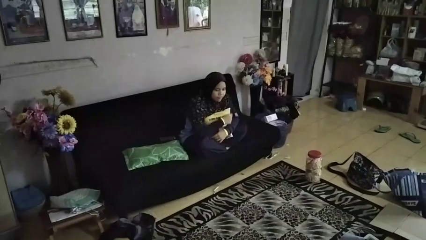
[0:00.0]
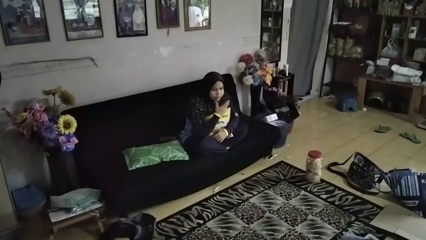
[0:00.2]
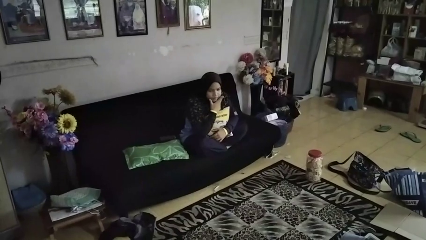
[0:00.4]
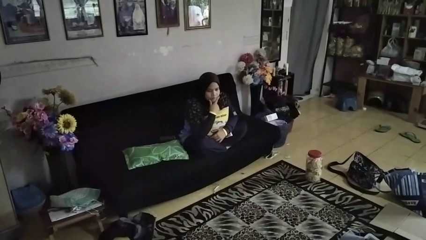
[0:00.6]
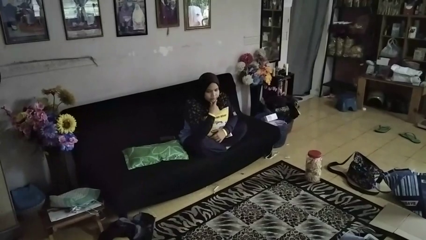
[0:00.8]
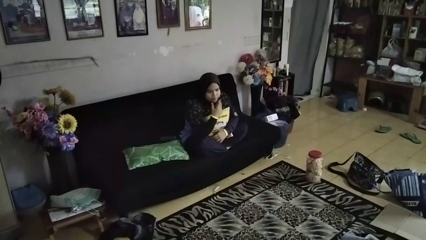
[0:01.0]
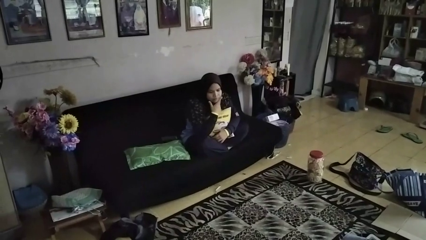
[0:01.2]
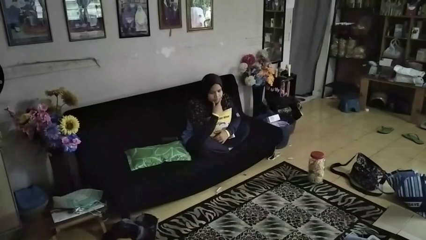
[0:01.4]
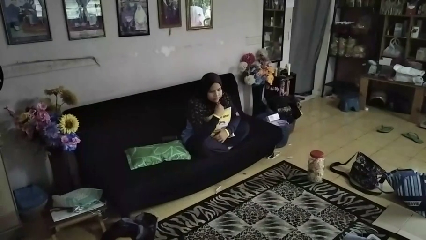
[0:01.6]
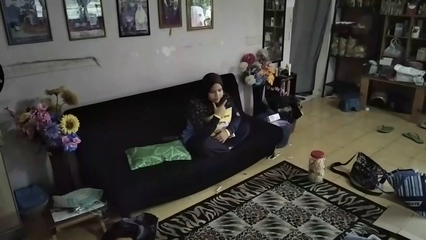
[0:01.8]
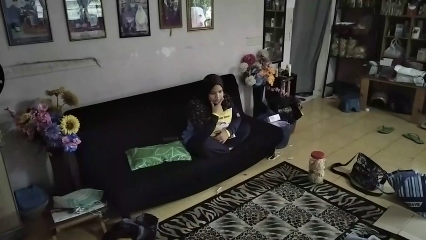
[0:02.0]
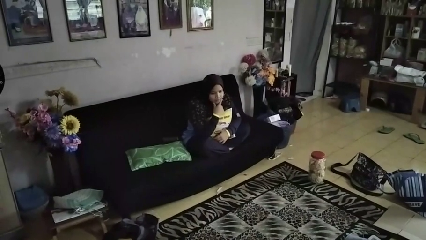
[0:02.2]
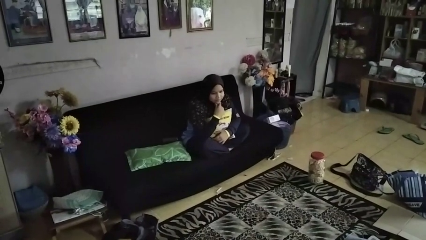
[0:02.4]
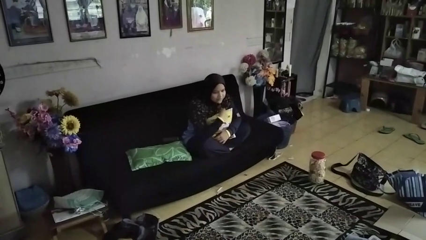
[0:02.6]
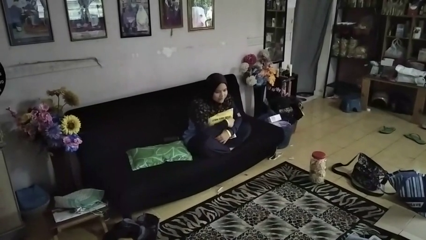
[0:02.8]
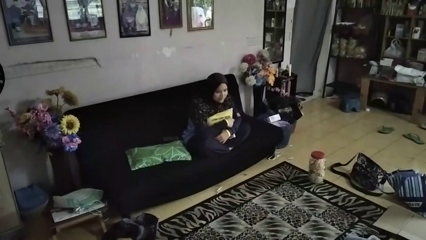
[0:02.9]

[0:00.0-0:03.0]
person strokes chin

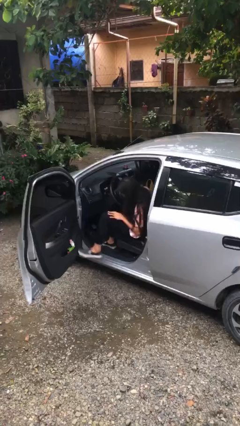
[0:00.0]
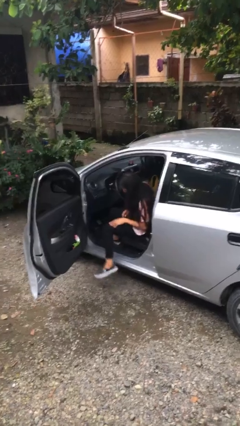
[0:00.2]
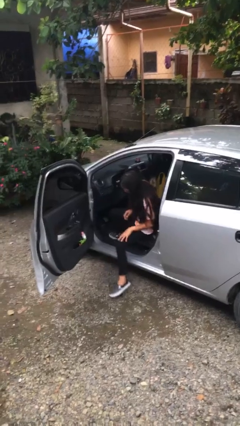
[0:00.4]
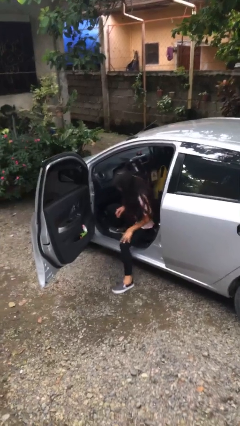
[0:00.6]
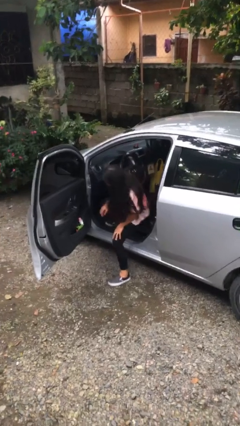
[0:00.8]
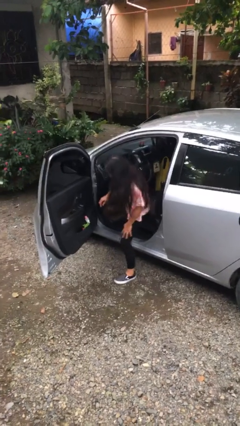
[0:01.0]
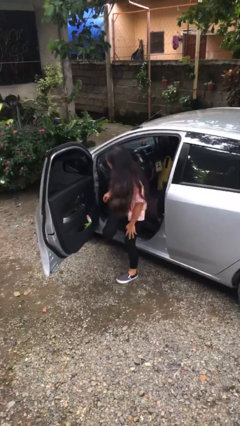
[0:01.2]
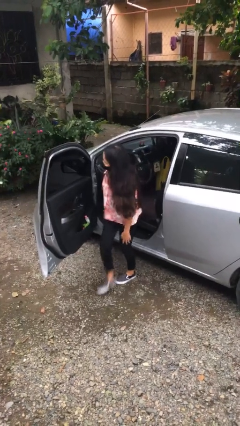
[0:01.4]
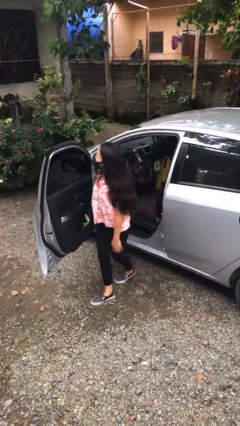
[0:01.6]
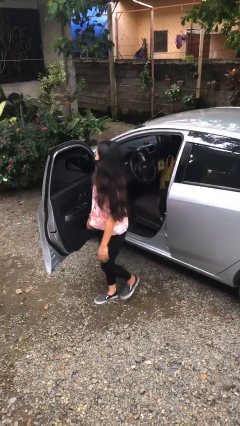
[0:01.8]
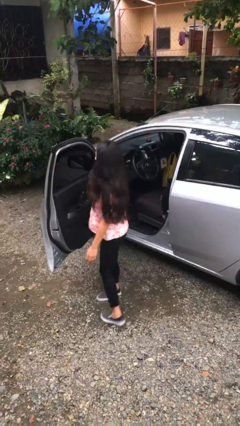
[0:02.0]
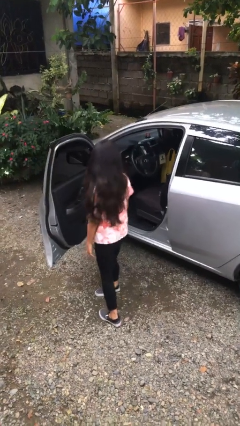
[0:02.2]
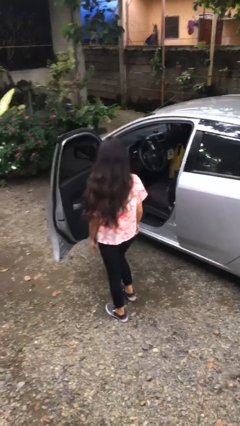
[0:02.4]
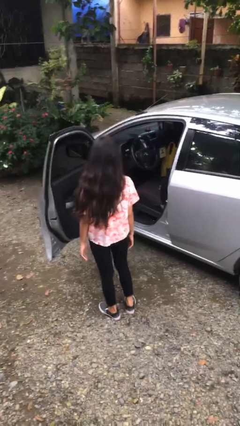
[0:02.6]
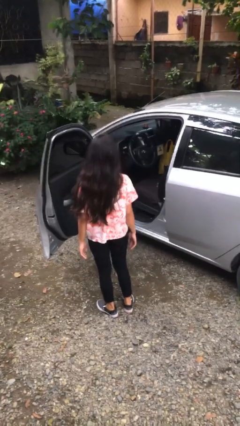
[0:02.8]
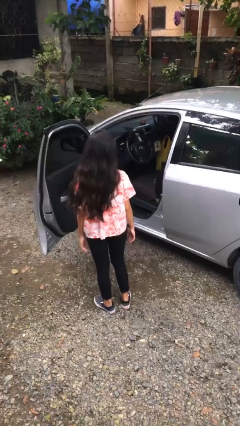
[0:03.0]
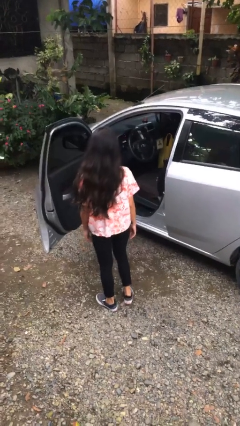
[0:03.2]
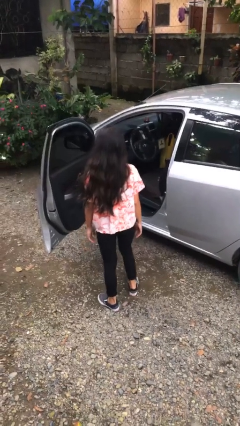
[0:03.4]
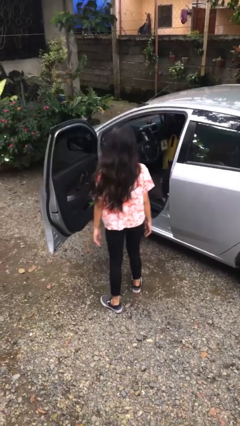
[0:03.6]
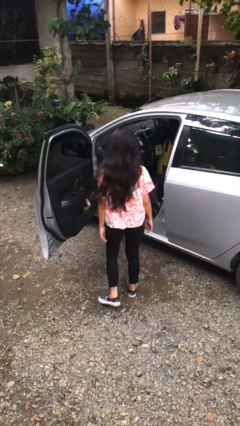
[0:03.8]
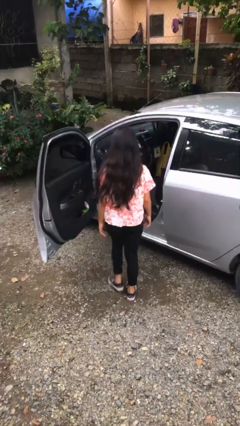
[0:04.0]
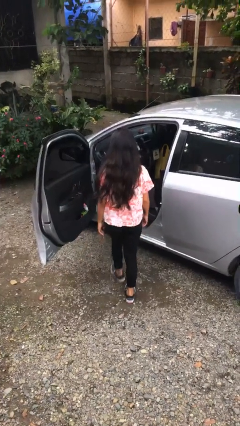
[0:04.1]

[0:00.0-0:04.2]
person exits car

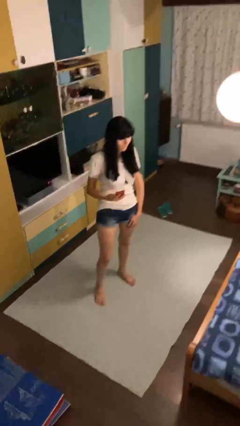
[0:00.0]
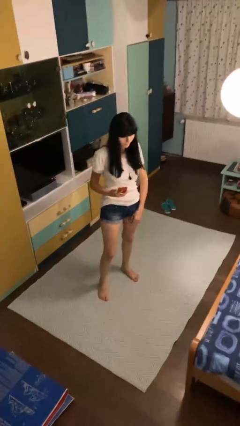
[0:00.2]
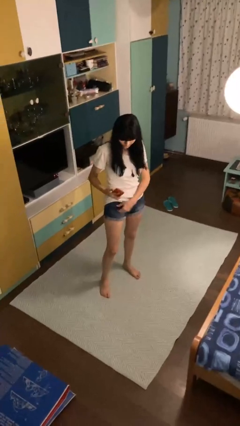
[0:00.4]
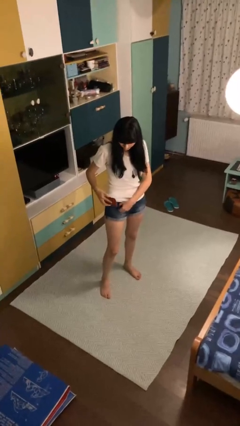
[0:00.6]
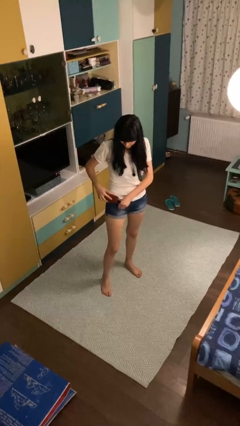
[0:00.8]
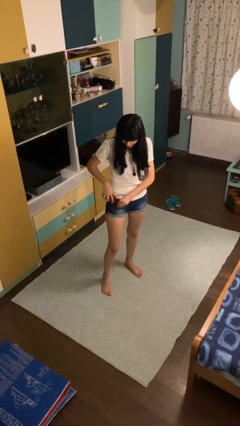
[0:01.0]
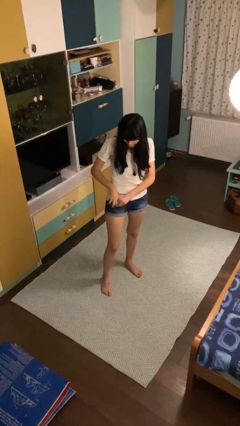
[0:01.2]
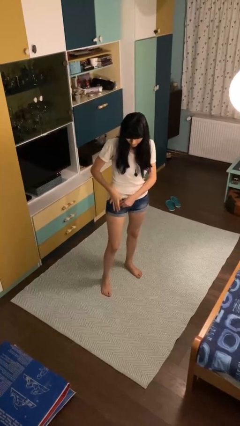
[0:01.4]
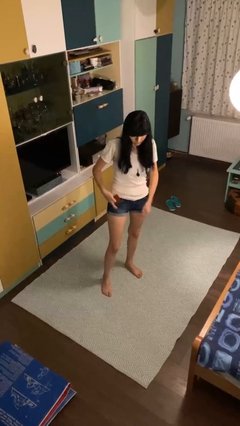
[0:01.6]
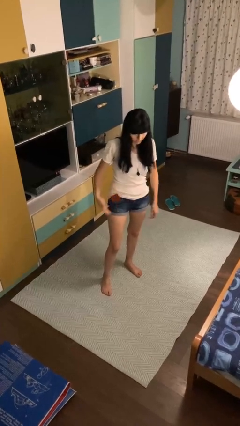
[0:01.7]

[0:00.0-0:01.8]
person puts phone into pocket

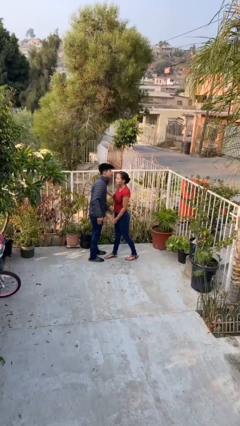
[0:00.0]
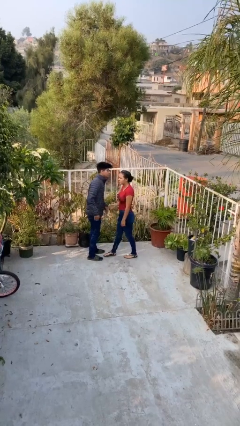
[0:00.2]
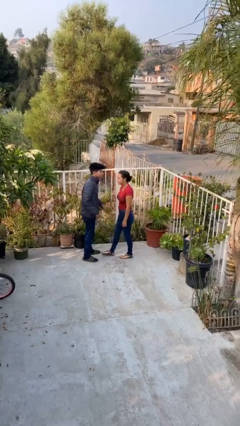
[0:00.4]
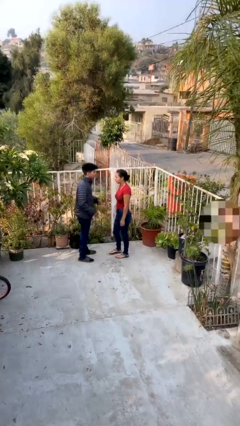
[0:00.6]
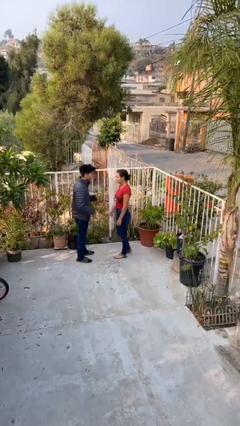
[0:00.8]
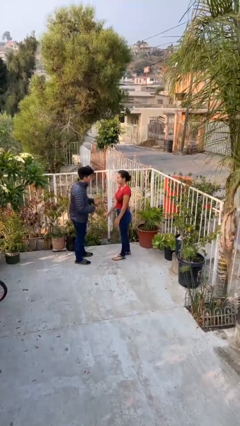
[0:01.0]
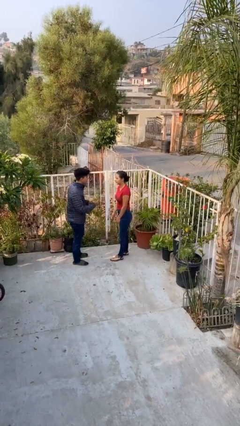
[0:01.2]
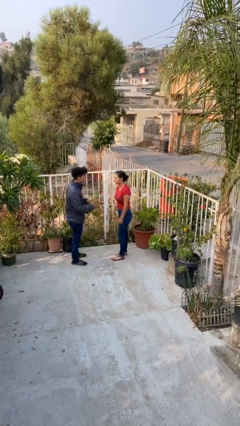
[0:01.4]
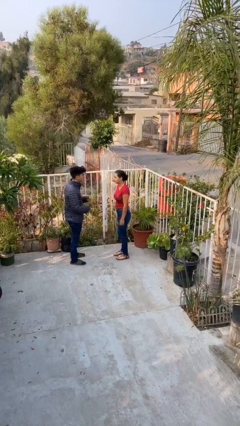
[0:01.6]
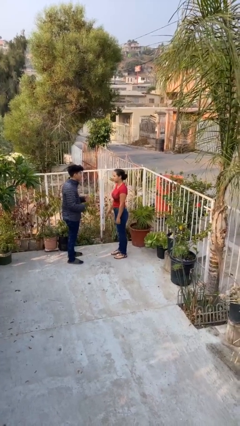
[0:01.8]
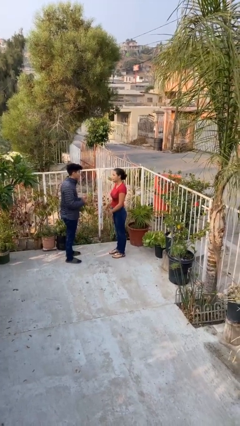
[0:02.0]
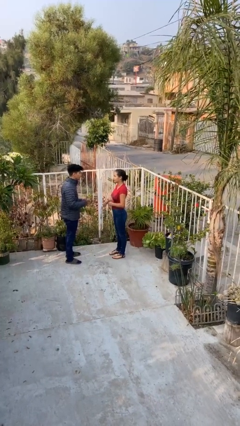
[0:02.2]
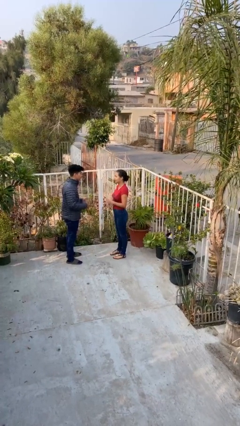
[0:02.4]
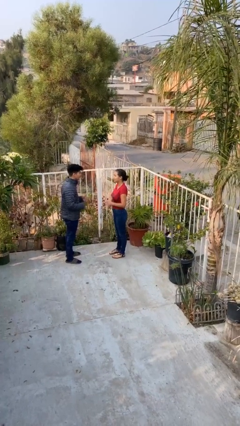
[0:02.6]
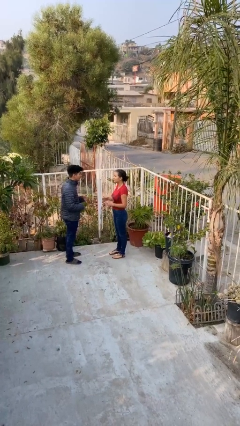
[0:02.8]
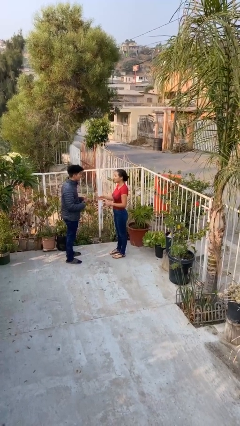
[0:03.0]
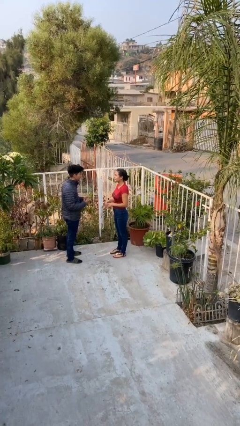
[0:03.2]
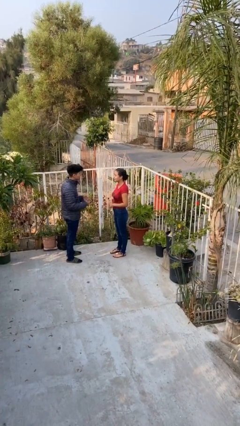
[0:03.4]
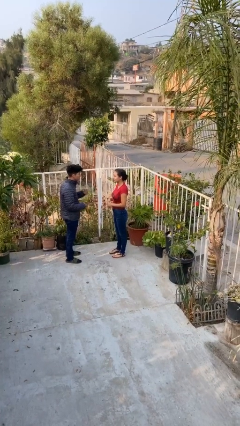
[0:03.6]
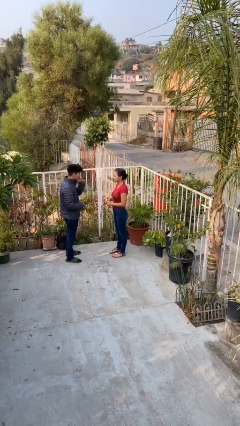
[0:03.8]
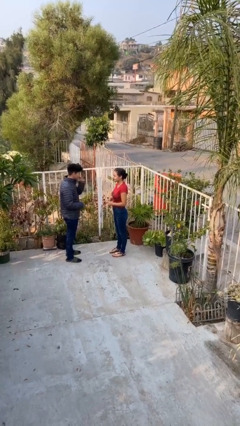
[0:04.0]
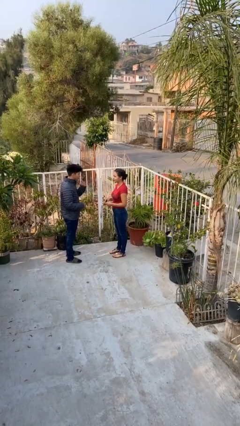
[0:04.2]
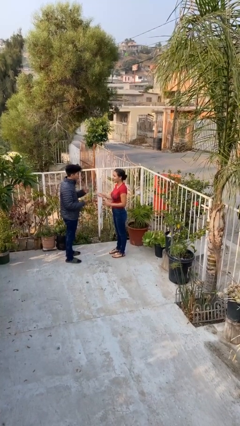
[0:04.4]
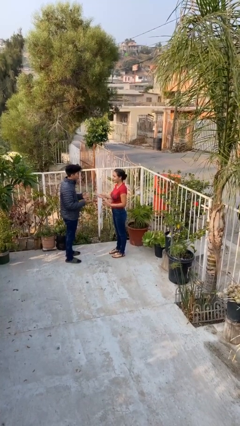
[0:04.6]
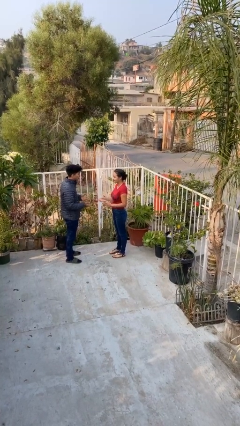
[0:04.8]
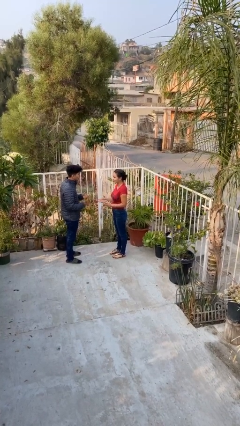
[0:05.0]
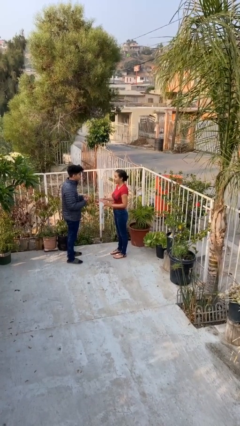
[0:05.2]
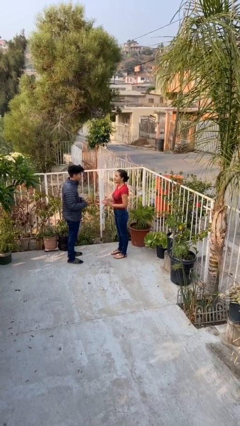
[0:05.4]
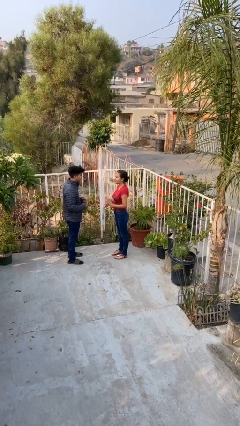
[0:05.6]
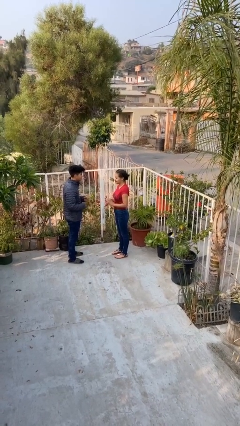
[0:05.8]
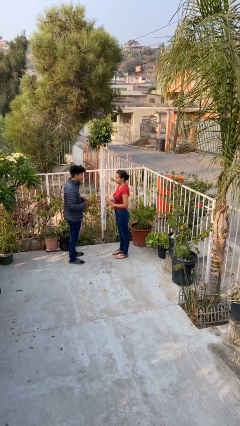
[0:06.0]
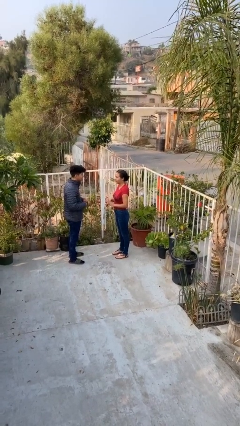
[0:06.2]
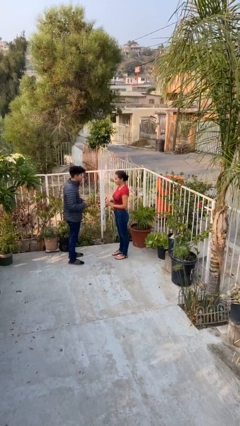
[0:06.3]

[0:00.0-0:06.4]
person talks to person

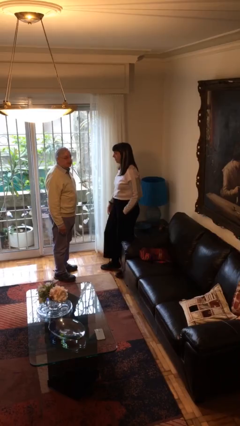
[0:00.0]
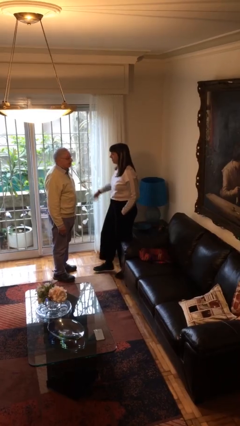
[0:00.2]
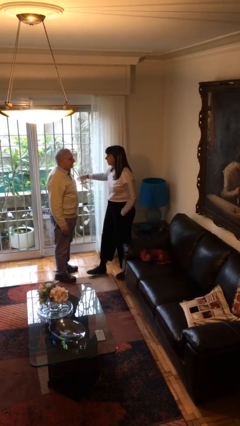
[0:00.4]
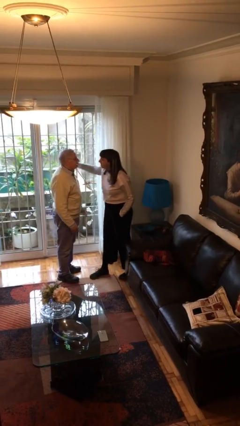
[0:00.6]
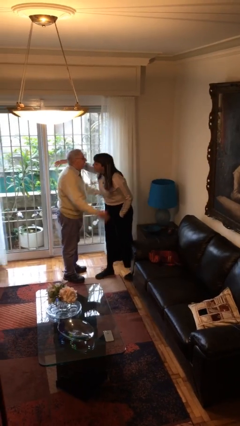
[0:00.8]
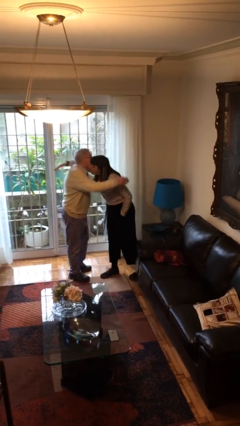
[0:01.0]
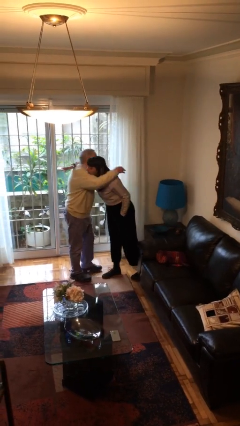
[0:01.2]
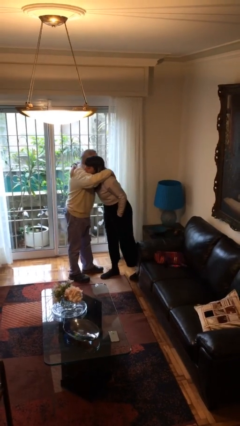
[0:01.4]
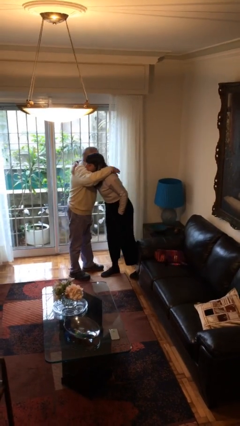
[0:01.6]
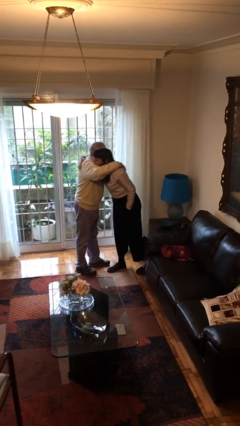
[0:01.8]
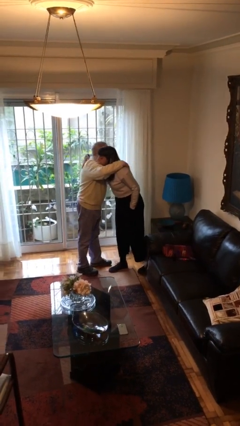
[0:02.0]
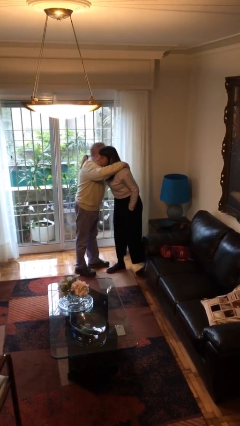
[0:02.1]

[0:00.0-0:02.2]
person embraces person
